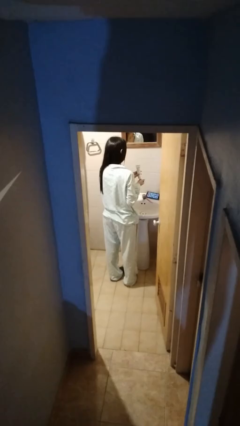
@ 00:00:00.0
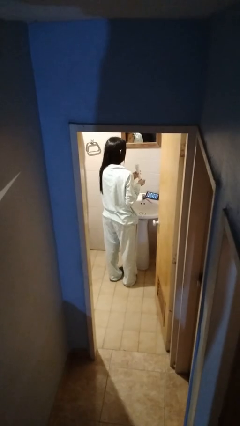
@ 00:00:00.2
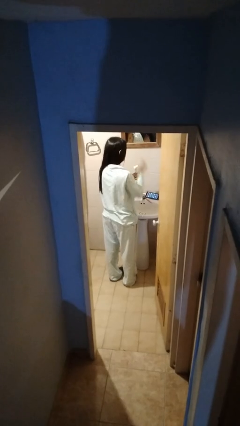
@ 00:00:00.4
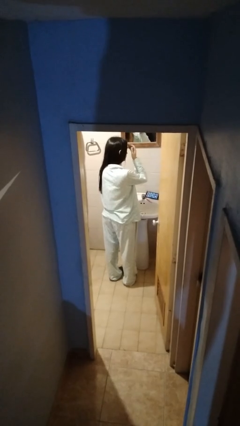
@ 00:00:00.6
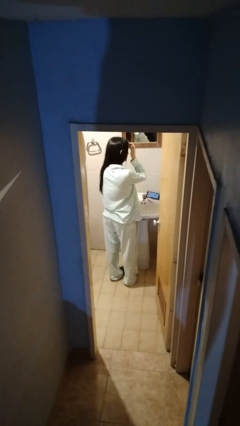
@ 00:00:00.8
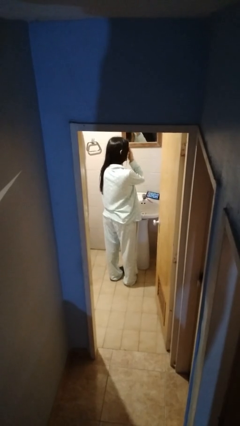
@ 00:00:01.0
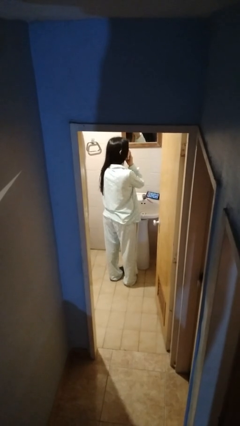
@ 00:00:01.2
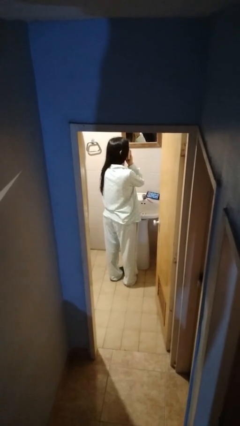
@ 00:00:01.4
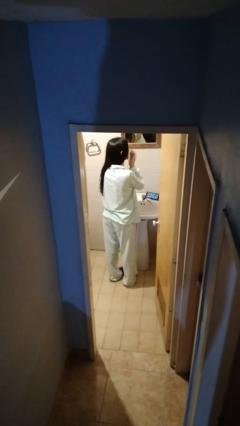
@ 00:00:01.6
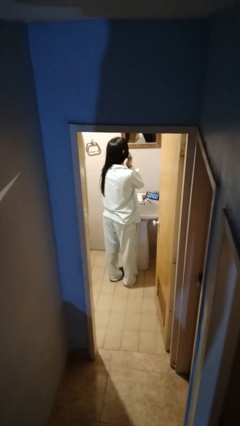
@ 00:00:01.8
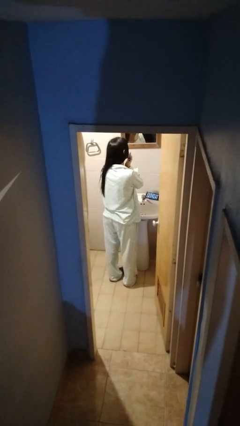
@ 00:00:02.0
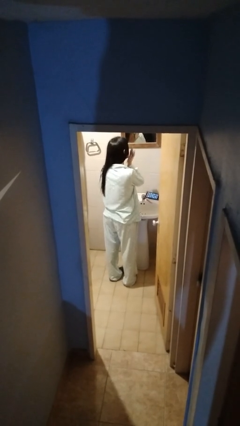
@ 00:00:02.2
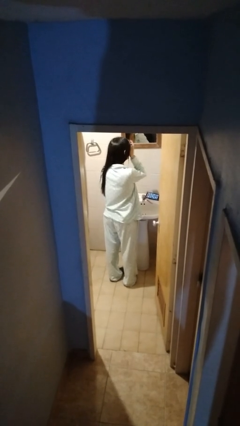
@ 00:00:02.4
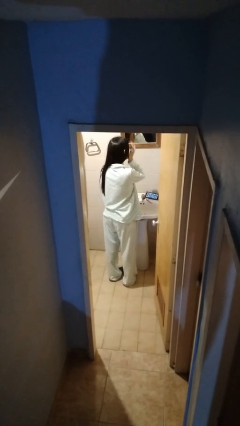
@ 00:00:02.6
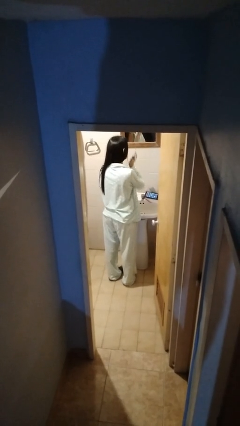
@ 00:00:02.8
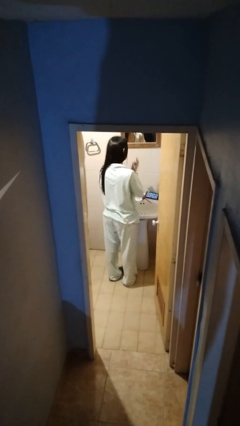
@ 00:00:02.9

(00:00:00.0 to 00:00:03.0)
person applies facial moisturizer

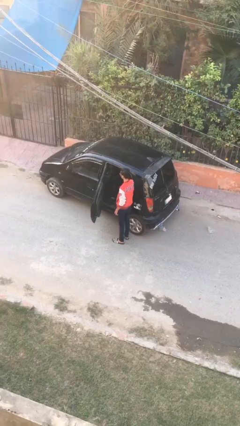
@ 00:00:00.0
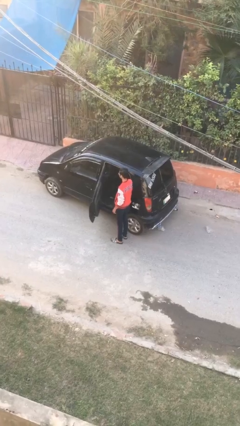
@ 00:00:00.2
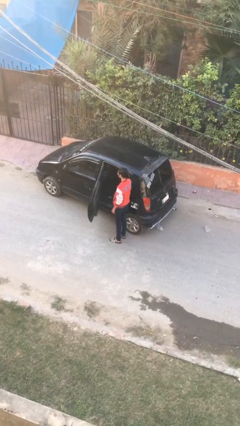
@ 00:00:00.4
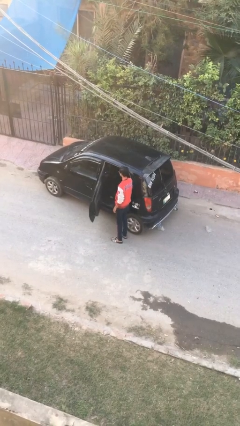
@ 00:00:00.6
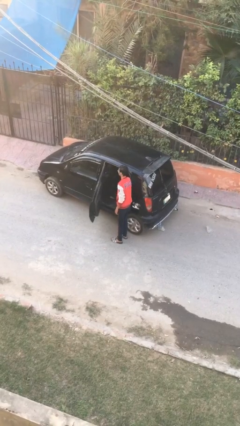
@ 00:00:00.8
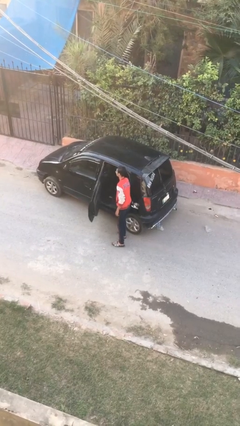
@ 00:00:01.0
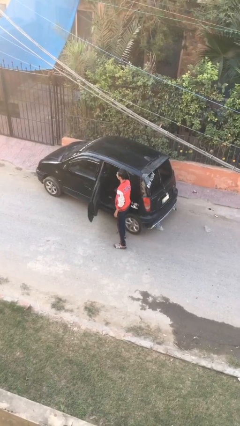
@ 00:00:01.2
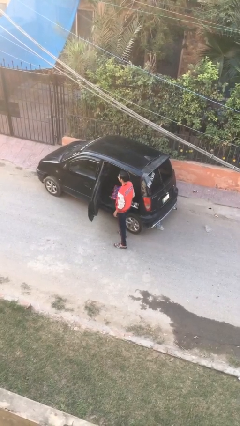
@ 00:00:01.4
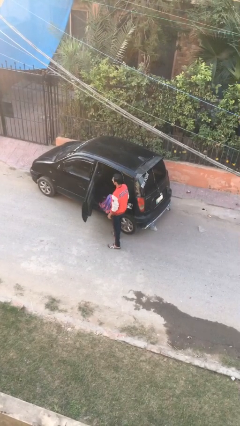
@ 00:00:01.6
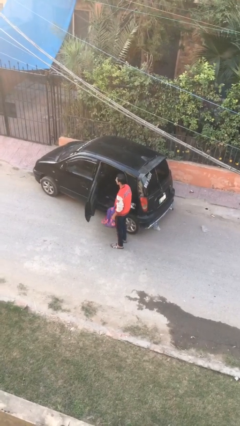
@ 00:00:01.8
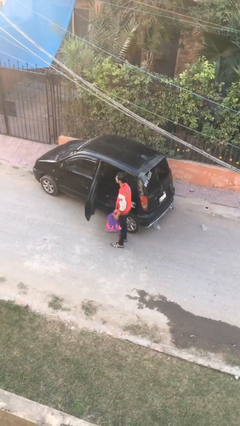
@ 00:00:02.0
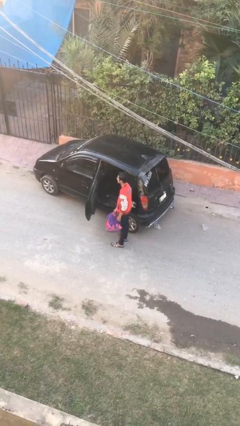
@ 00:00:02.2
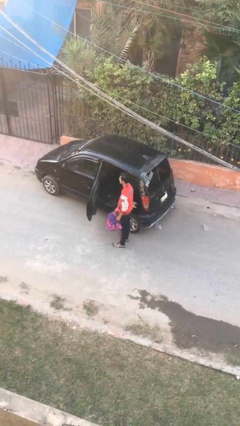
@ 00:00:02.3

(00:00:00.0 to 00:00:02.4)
person unloads car

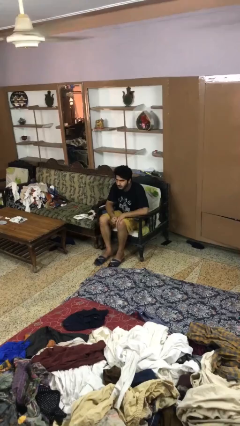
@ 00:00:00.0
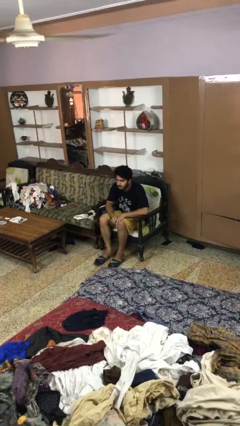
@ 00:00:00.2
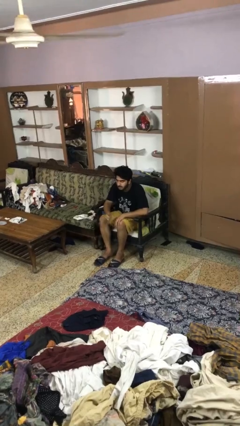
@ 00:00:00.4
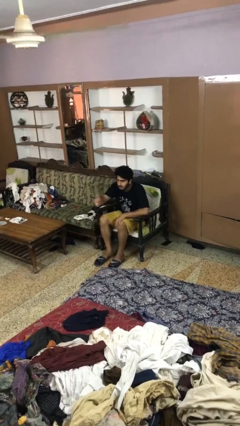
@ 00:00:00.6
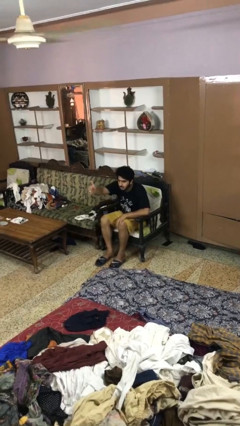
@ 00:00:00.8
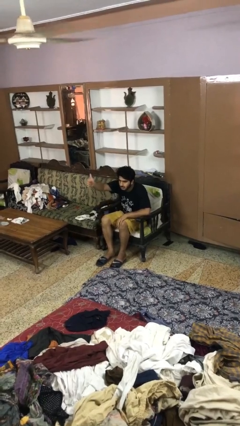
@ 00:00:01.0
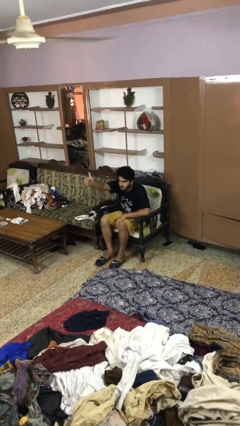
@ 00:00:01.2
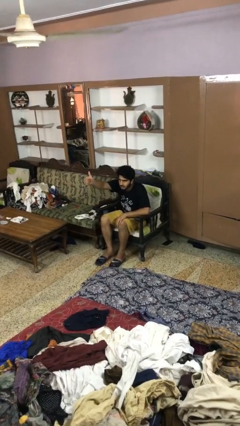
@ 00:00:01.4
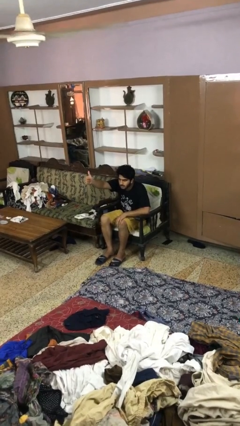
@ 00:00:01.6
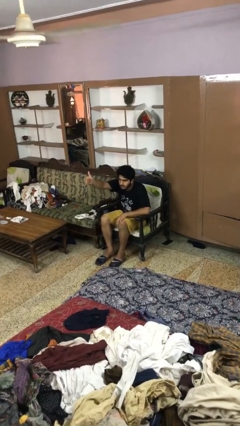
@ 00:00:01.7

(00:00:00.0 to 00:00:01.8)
person gestures thumbs up

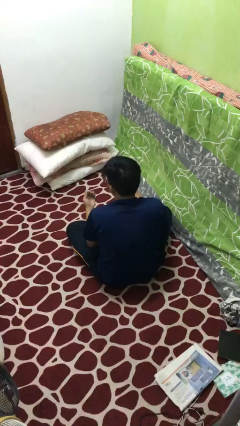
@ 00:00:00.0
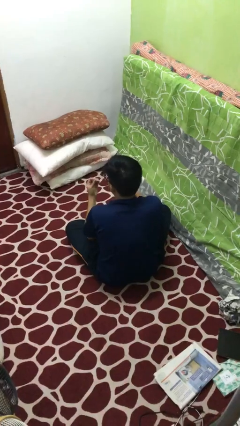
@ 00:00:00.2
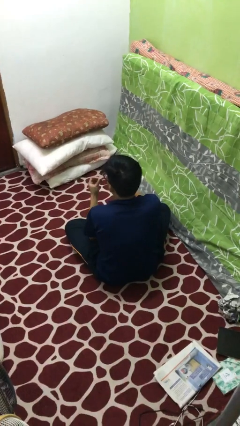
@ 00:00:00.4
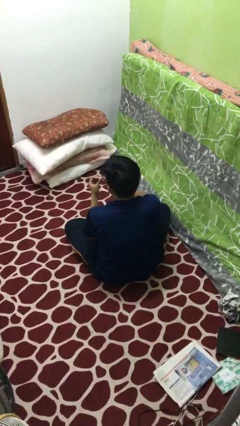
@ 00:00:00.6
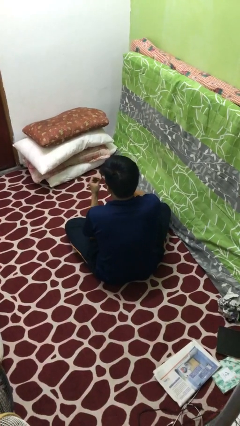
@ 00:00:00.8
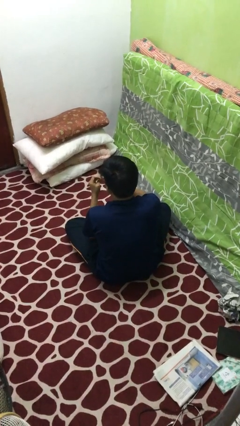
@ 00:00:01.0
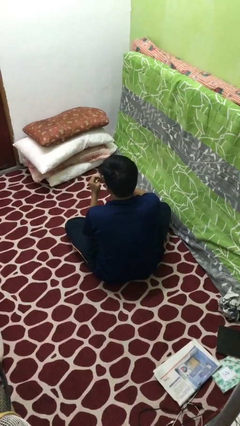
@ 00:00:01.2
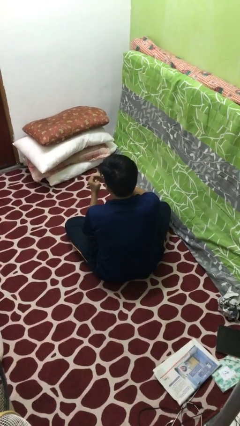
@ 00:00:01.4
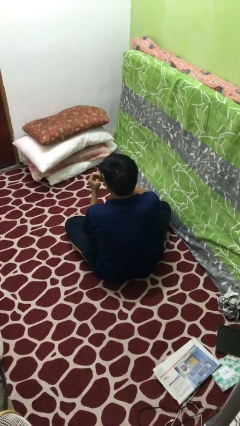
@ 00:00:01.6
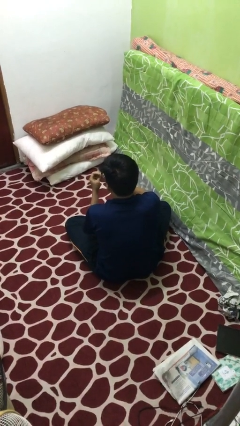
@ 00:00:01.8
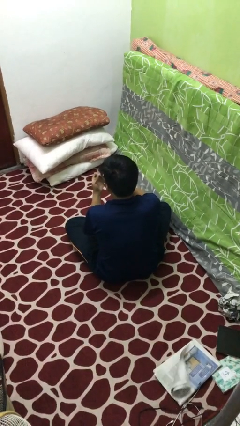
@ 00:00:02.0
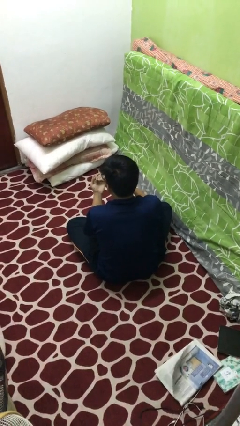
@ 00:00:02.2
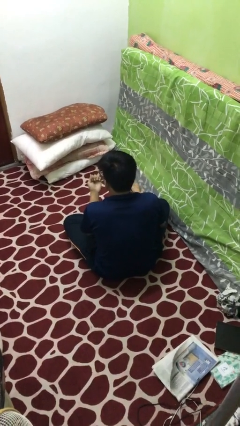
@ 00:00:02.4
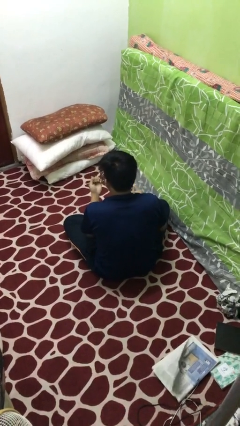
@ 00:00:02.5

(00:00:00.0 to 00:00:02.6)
person clips fingernails

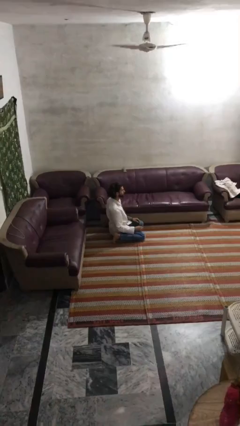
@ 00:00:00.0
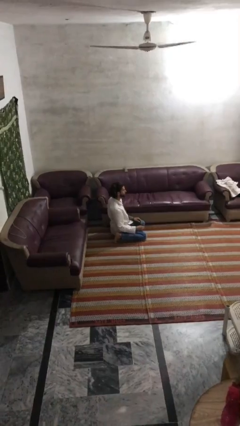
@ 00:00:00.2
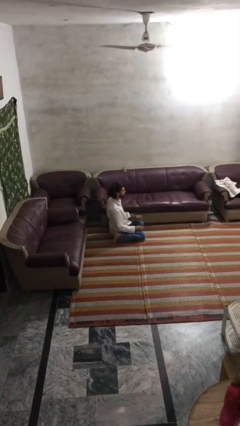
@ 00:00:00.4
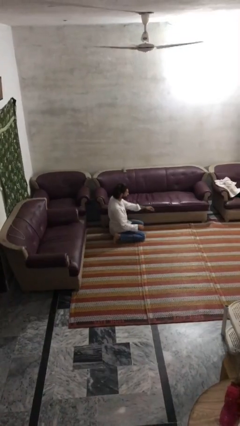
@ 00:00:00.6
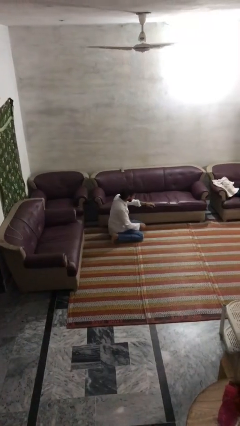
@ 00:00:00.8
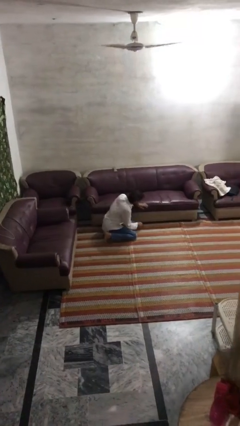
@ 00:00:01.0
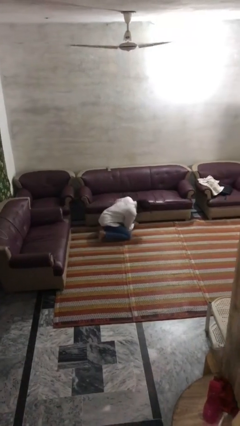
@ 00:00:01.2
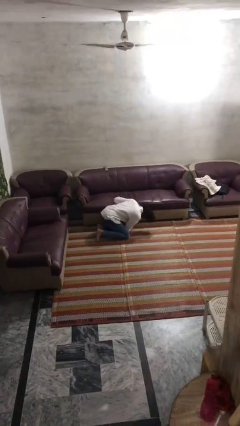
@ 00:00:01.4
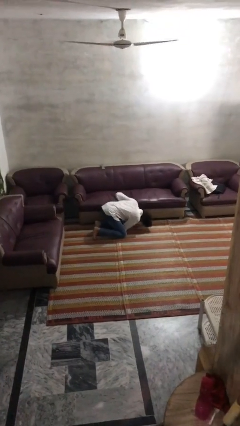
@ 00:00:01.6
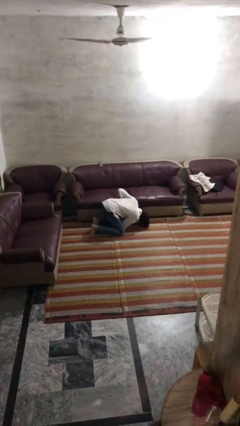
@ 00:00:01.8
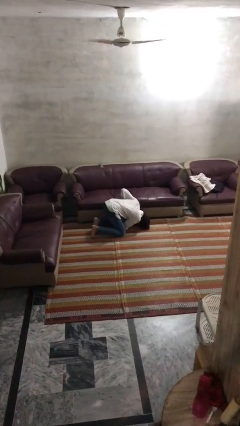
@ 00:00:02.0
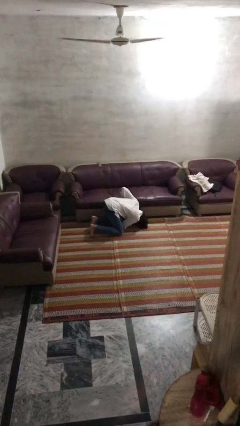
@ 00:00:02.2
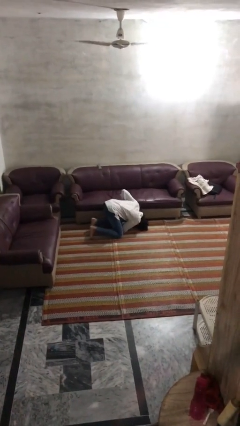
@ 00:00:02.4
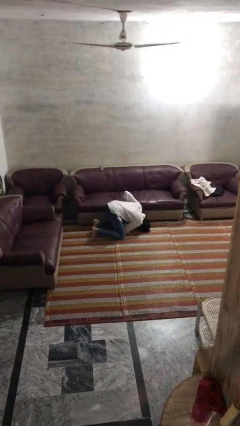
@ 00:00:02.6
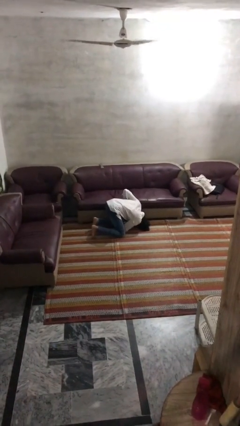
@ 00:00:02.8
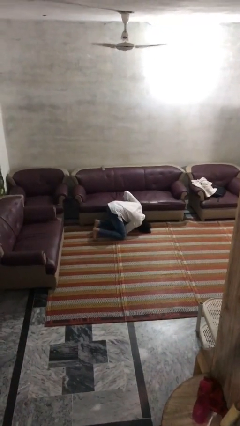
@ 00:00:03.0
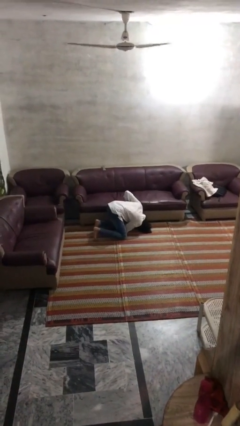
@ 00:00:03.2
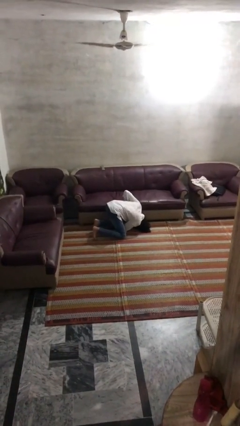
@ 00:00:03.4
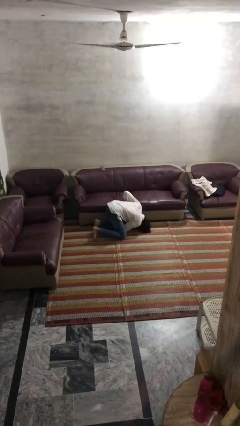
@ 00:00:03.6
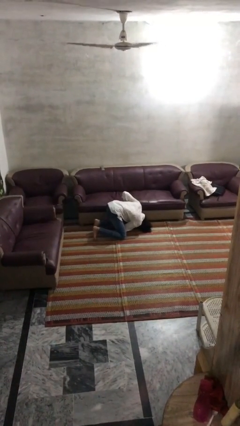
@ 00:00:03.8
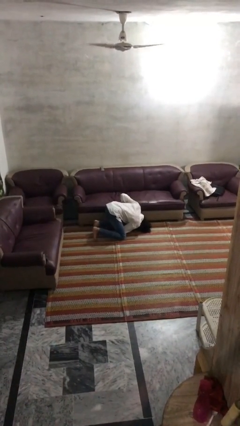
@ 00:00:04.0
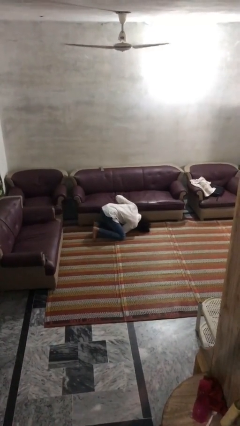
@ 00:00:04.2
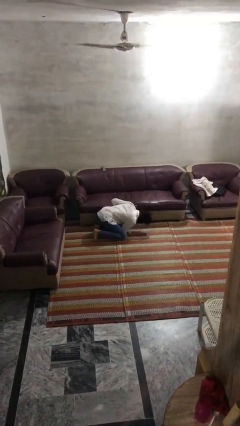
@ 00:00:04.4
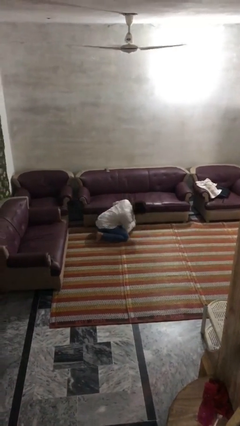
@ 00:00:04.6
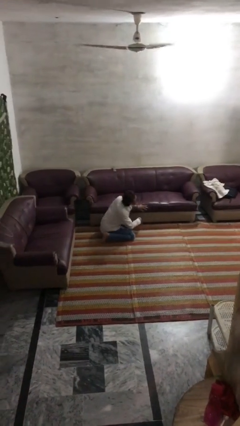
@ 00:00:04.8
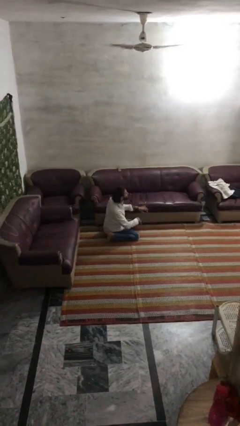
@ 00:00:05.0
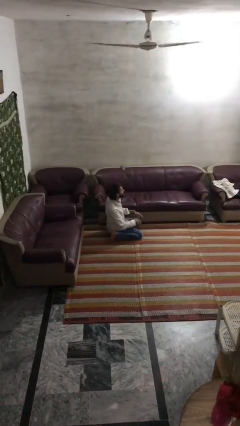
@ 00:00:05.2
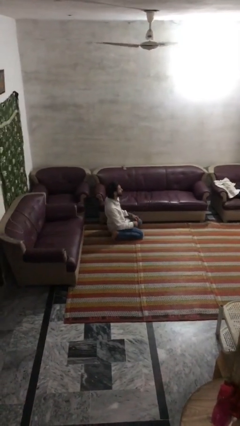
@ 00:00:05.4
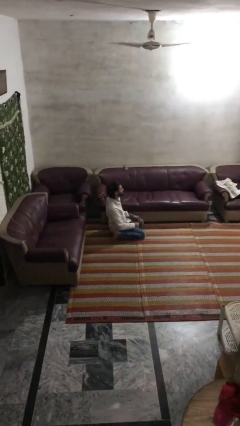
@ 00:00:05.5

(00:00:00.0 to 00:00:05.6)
person searches under couch

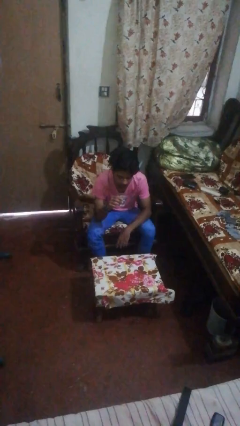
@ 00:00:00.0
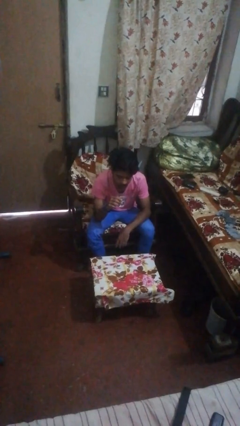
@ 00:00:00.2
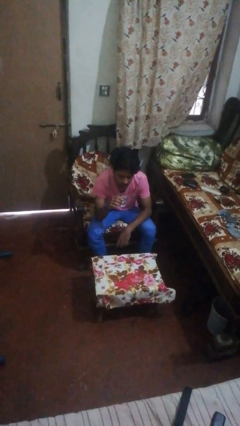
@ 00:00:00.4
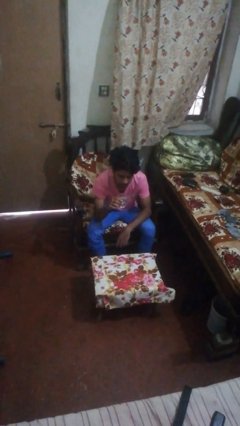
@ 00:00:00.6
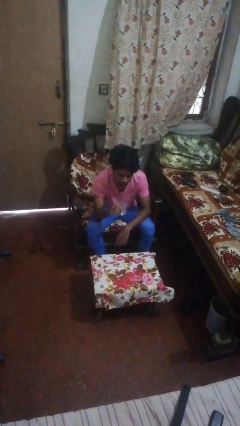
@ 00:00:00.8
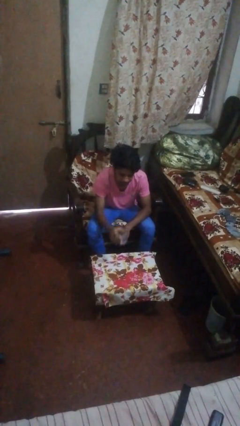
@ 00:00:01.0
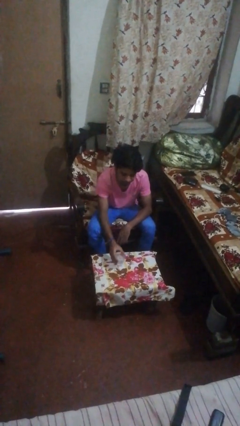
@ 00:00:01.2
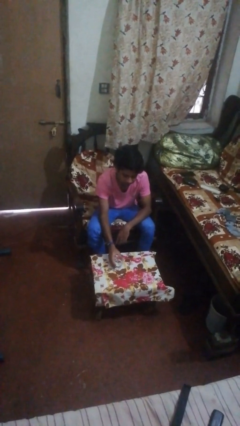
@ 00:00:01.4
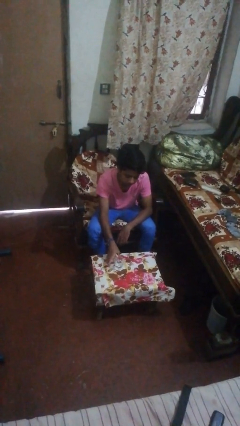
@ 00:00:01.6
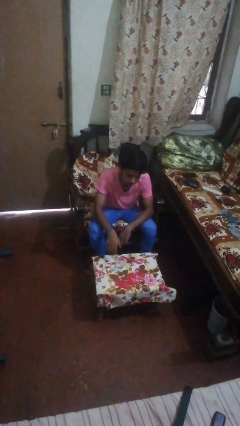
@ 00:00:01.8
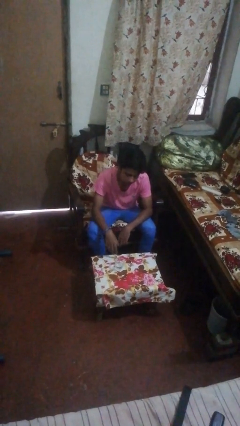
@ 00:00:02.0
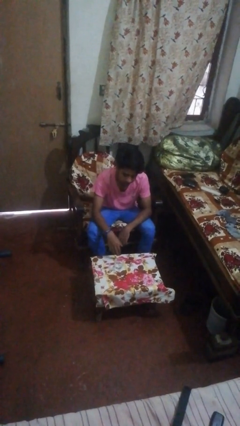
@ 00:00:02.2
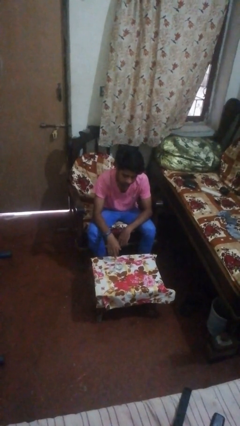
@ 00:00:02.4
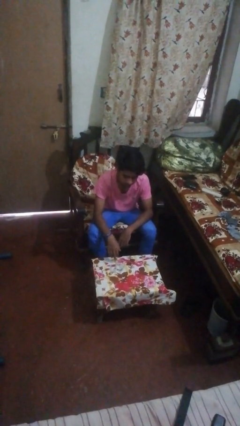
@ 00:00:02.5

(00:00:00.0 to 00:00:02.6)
person puts down object on table
